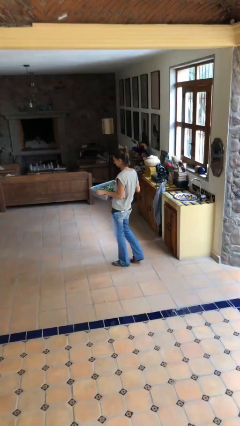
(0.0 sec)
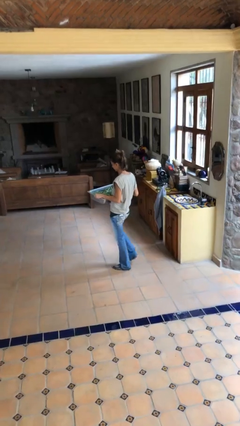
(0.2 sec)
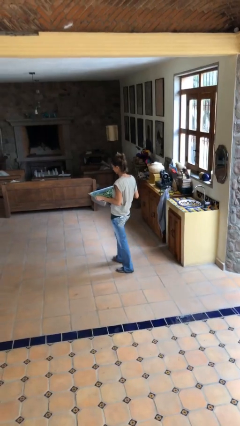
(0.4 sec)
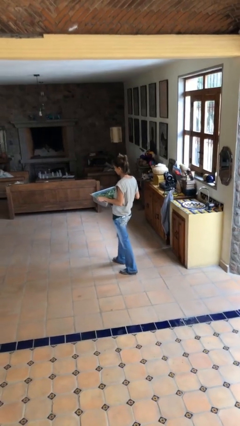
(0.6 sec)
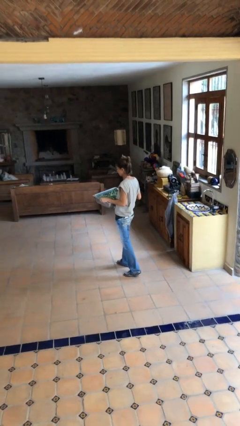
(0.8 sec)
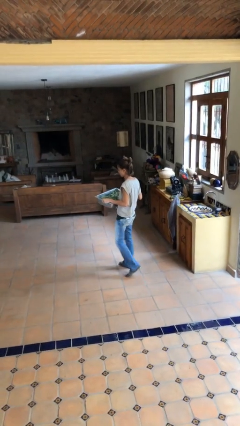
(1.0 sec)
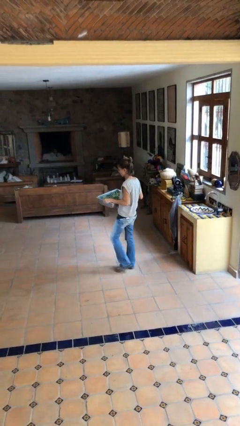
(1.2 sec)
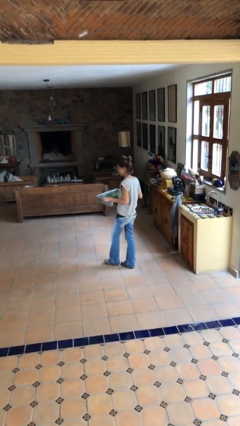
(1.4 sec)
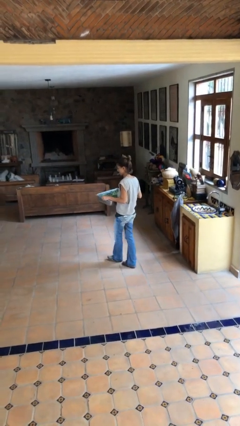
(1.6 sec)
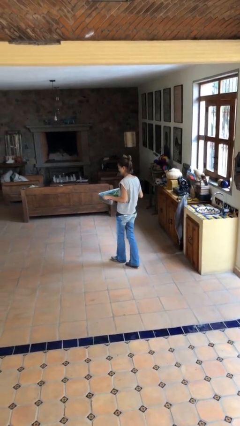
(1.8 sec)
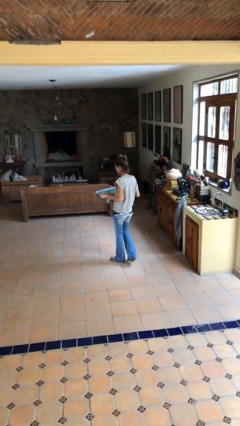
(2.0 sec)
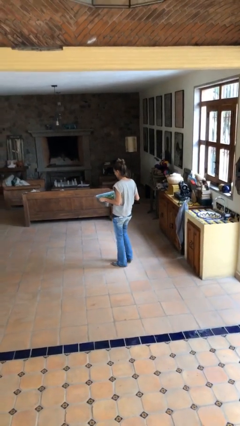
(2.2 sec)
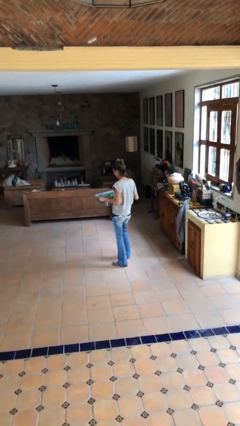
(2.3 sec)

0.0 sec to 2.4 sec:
person carries heavy object

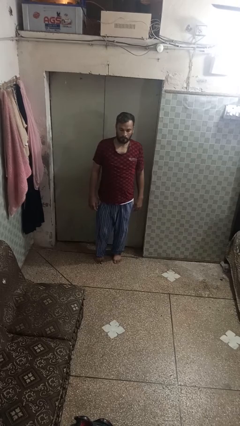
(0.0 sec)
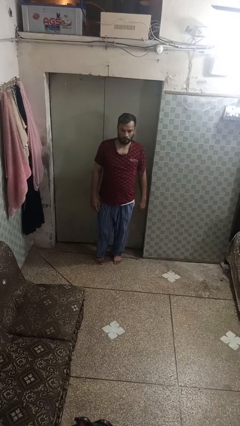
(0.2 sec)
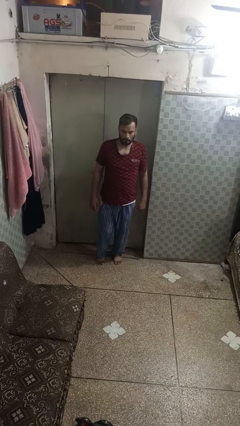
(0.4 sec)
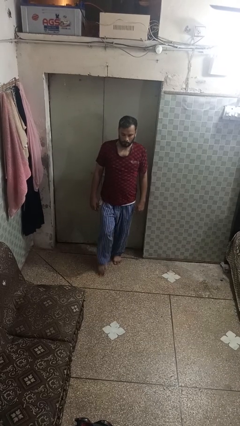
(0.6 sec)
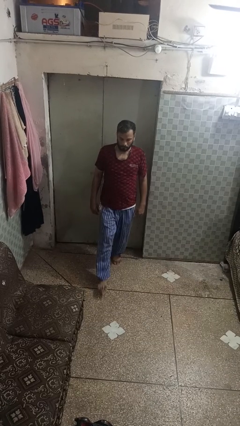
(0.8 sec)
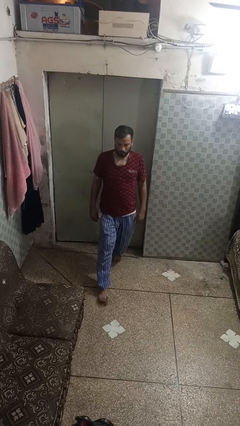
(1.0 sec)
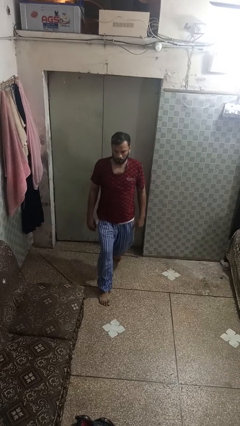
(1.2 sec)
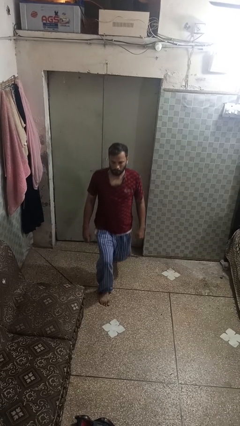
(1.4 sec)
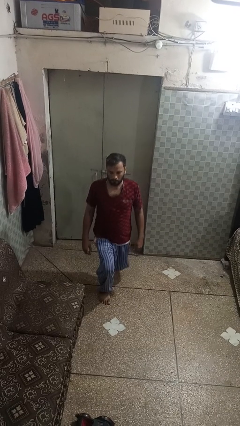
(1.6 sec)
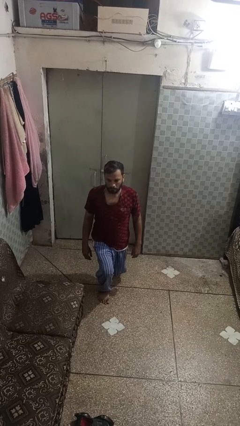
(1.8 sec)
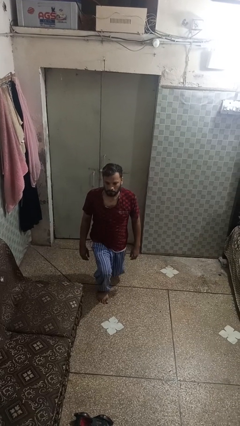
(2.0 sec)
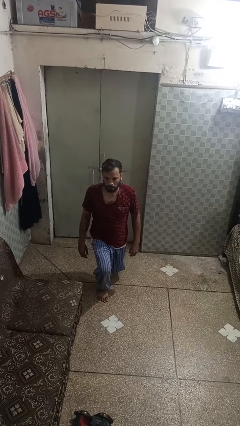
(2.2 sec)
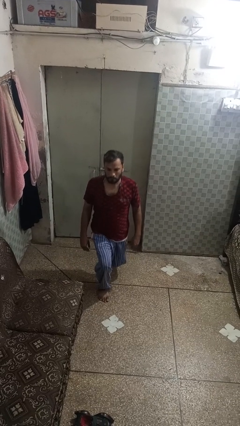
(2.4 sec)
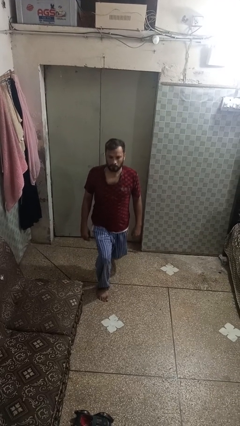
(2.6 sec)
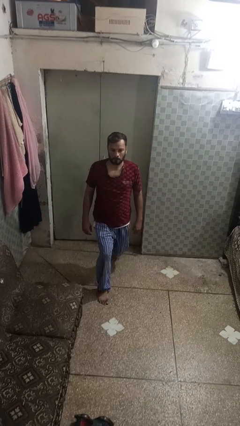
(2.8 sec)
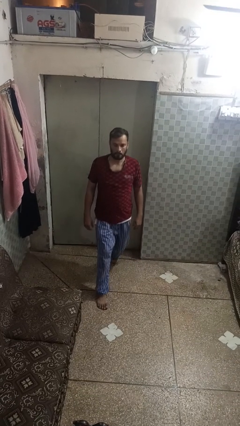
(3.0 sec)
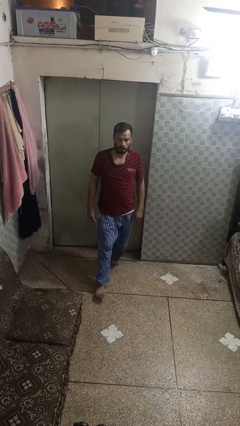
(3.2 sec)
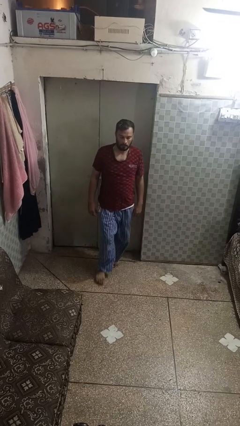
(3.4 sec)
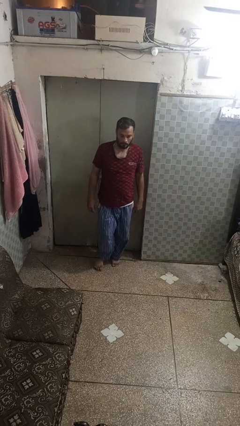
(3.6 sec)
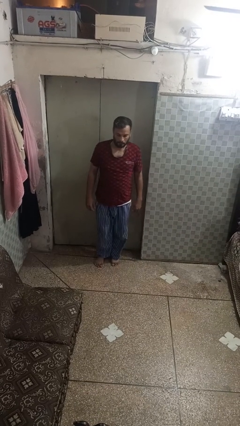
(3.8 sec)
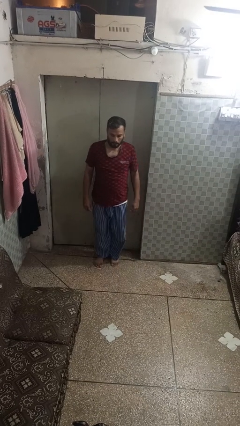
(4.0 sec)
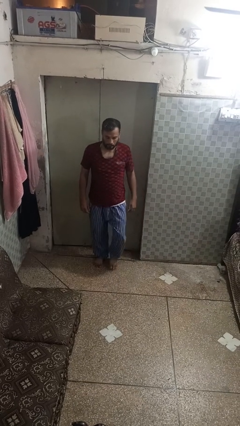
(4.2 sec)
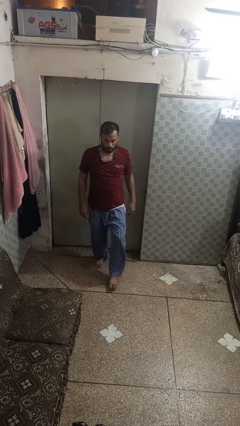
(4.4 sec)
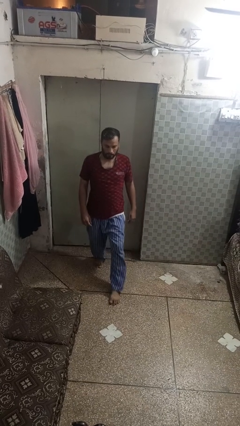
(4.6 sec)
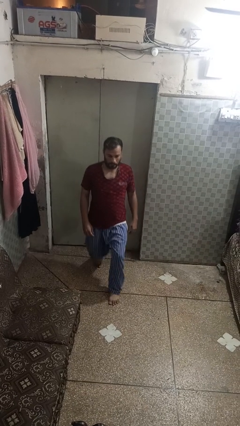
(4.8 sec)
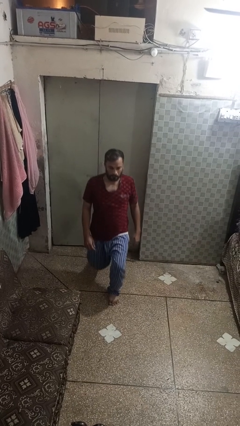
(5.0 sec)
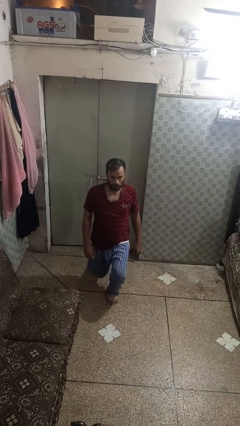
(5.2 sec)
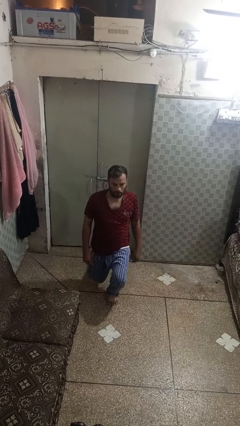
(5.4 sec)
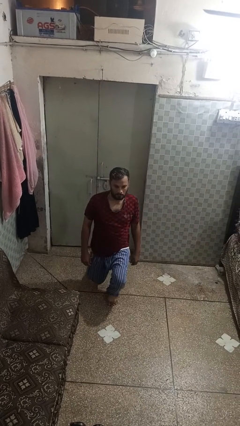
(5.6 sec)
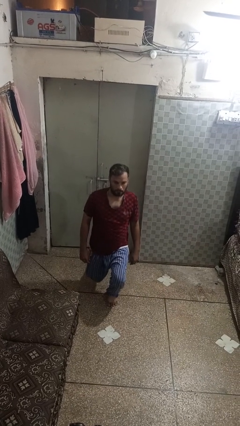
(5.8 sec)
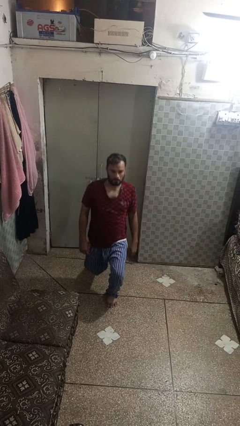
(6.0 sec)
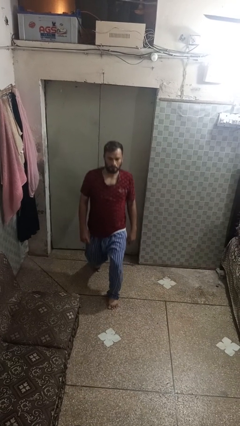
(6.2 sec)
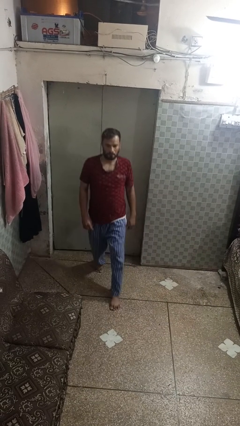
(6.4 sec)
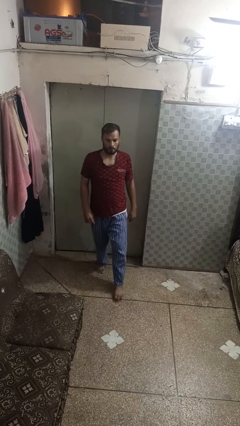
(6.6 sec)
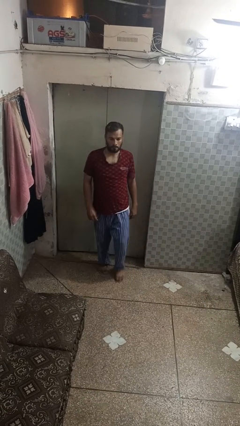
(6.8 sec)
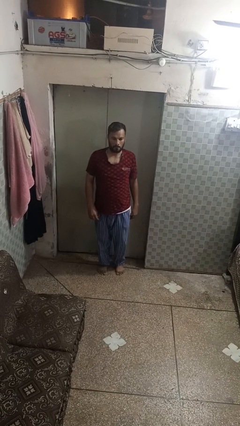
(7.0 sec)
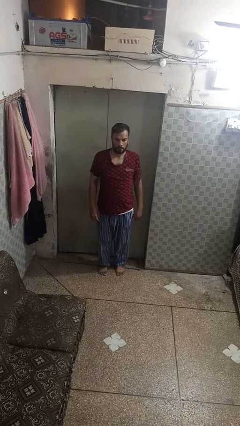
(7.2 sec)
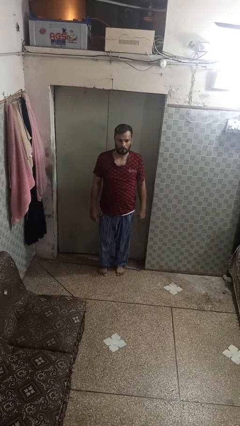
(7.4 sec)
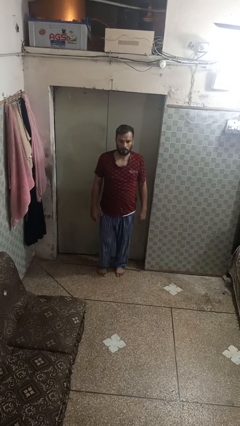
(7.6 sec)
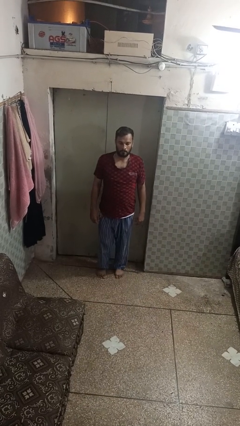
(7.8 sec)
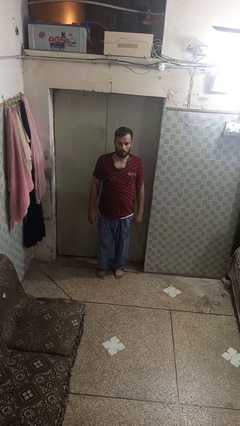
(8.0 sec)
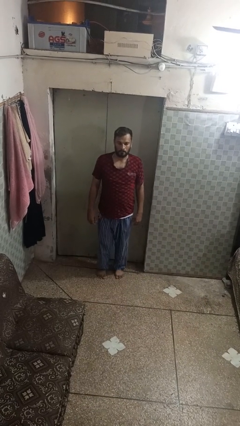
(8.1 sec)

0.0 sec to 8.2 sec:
person exercises with lunges

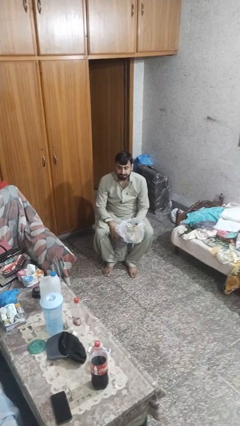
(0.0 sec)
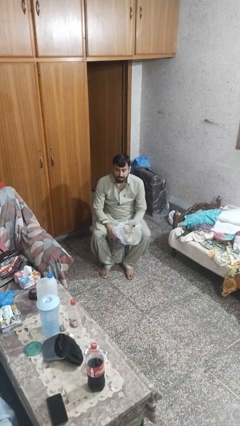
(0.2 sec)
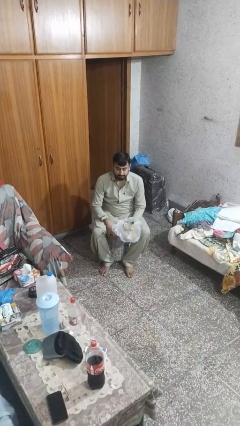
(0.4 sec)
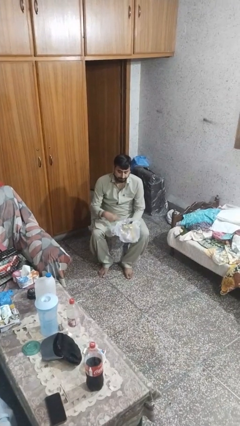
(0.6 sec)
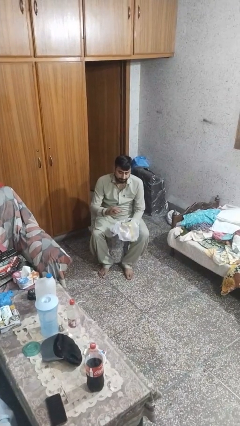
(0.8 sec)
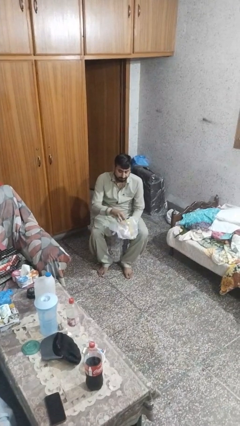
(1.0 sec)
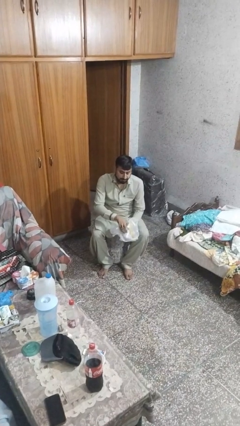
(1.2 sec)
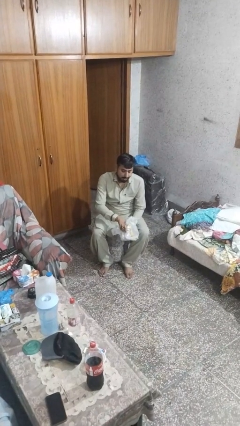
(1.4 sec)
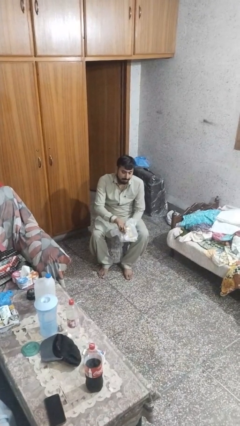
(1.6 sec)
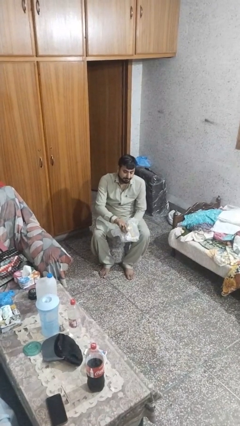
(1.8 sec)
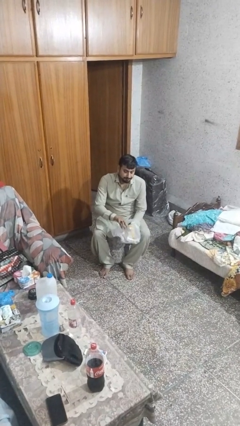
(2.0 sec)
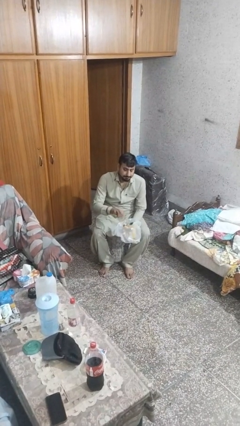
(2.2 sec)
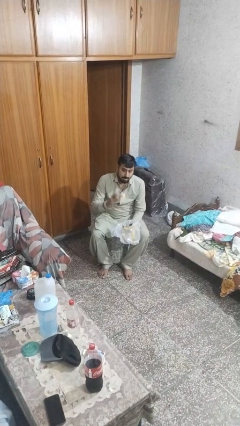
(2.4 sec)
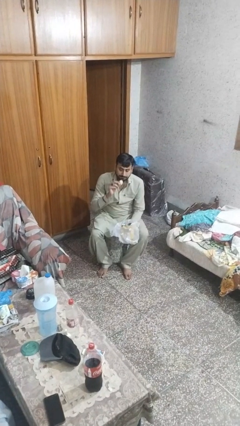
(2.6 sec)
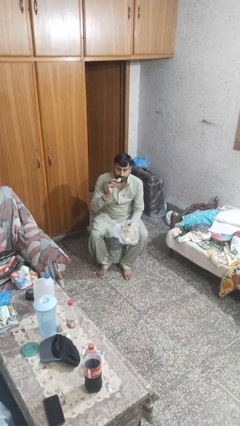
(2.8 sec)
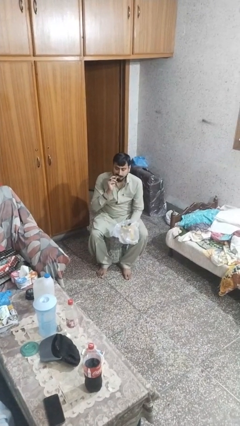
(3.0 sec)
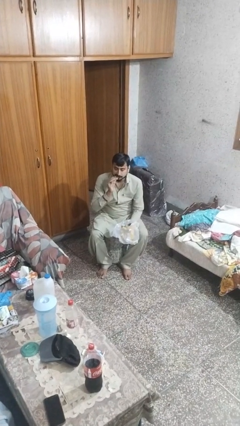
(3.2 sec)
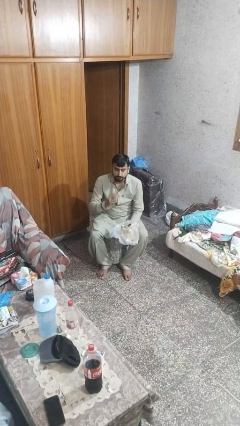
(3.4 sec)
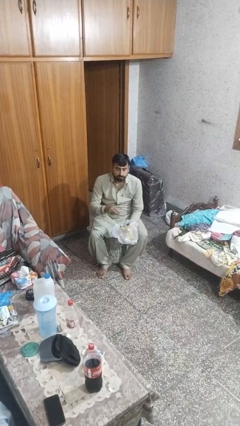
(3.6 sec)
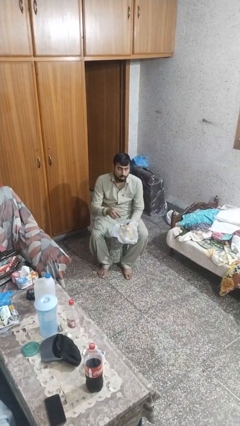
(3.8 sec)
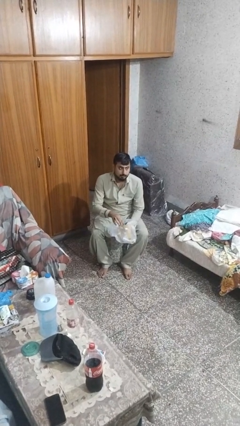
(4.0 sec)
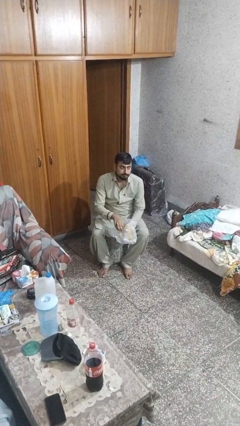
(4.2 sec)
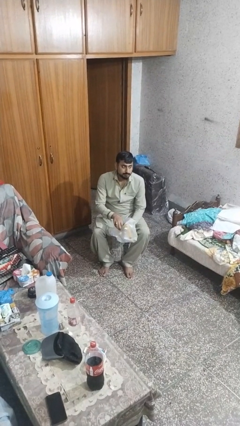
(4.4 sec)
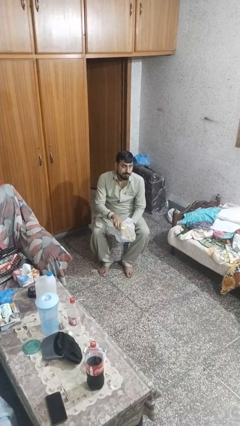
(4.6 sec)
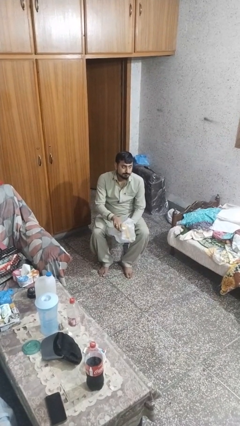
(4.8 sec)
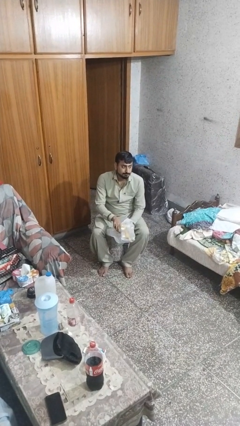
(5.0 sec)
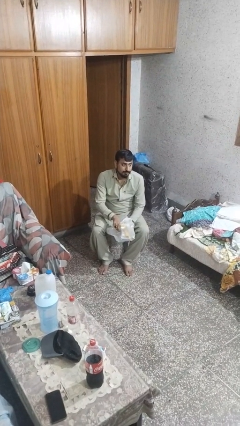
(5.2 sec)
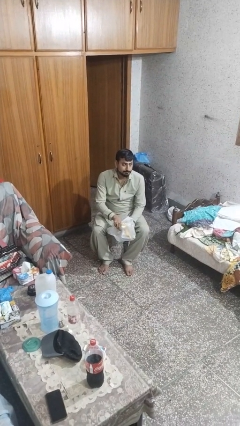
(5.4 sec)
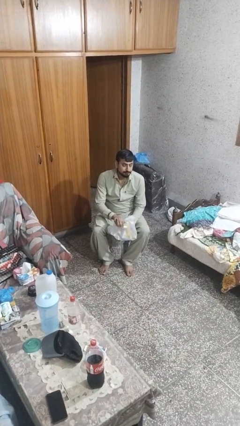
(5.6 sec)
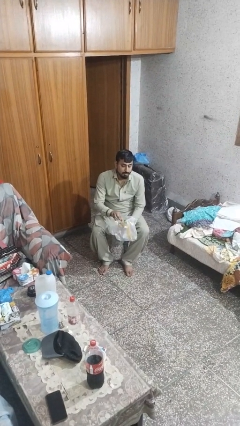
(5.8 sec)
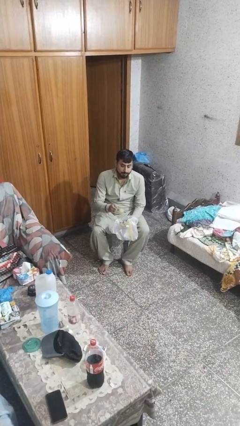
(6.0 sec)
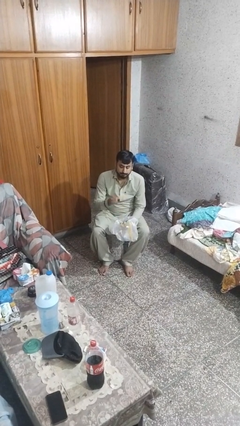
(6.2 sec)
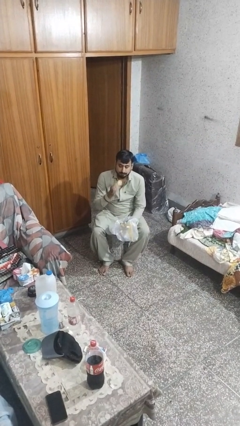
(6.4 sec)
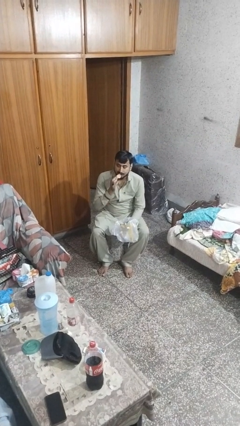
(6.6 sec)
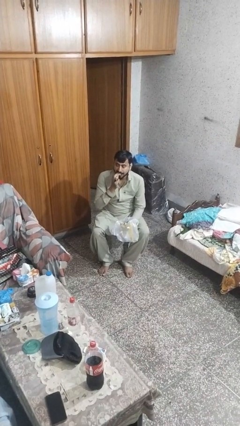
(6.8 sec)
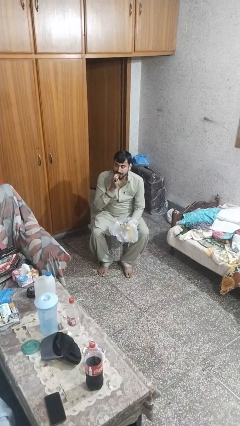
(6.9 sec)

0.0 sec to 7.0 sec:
person eats snack from bag
